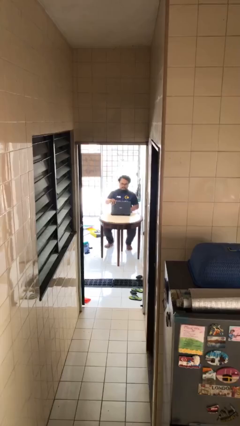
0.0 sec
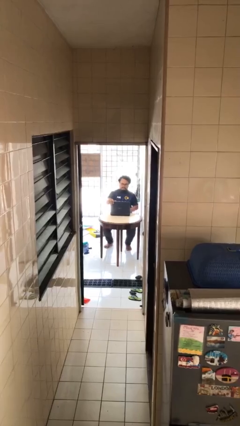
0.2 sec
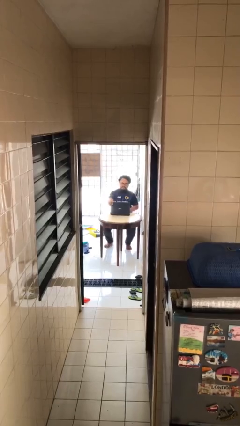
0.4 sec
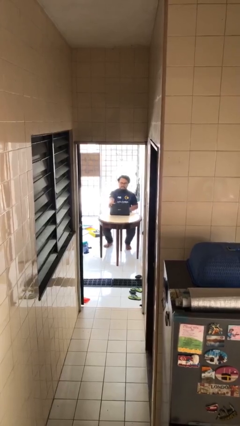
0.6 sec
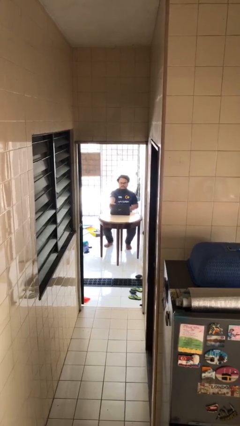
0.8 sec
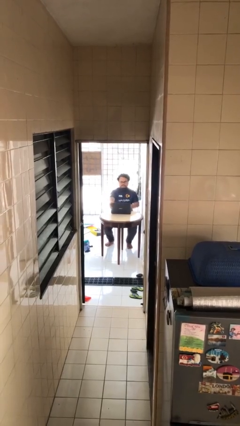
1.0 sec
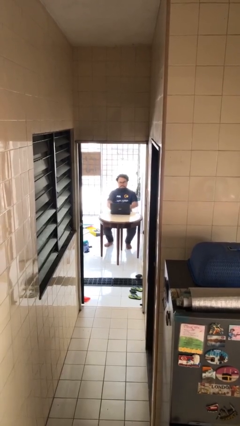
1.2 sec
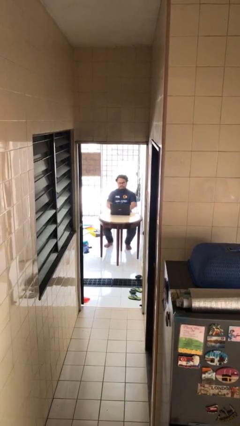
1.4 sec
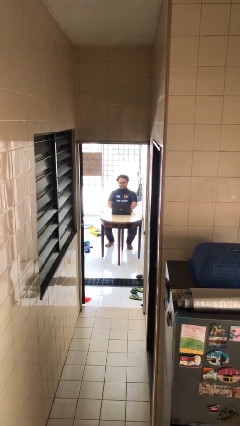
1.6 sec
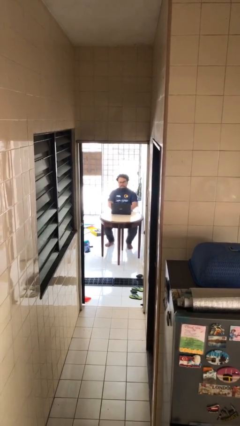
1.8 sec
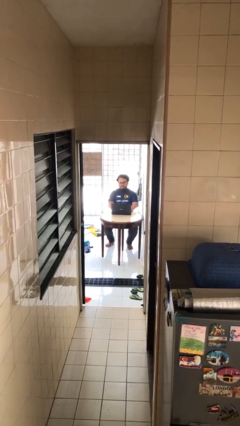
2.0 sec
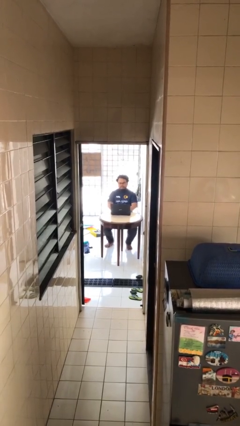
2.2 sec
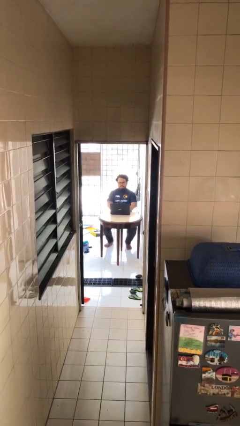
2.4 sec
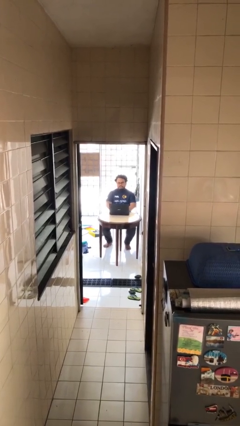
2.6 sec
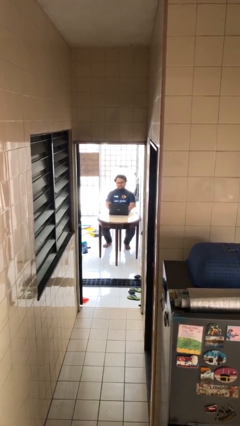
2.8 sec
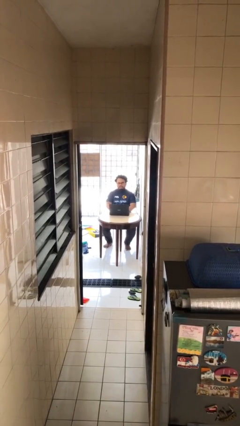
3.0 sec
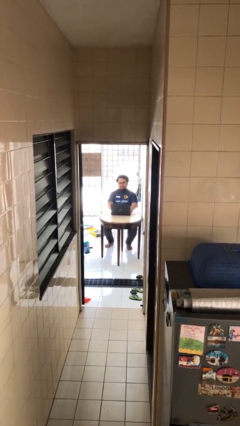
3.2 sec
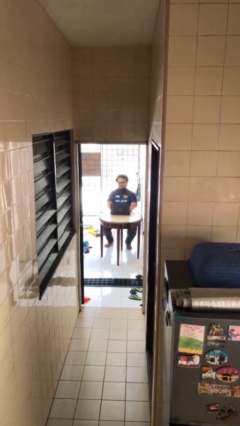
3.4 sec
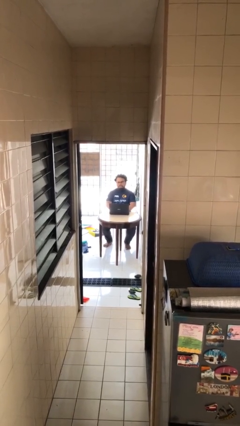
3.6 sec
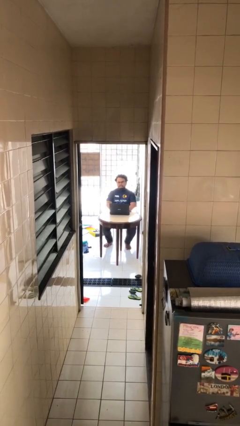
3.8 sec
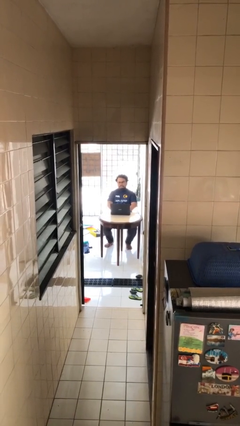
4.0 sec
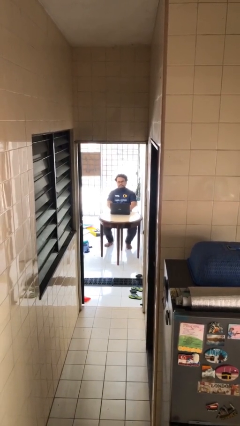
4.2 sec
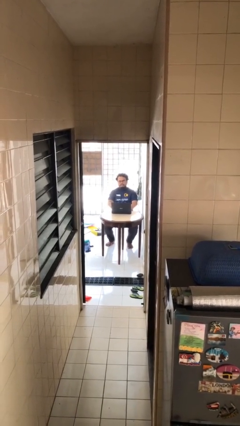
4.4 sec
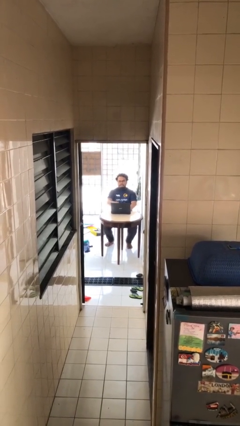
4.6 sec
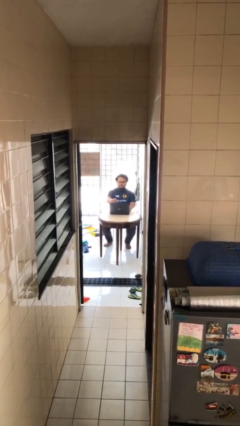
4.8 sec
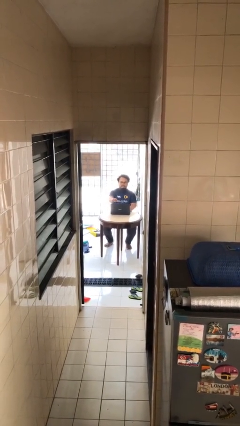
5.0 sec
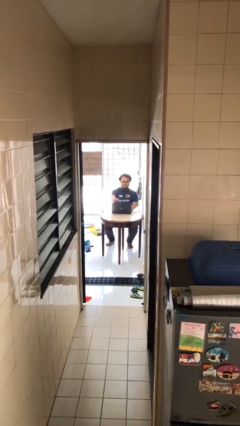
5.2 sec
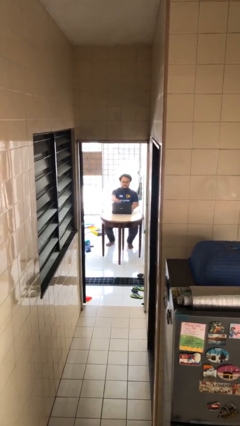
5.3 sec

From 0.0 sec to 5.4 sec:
person interacts with laptop

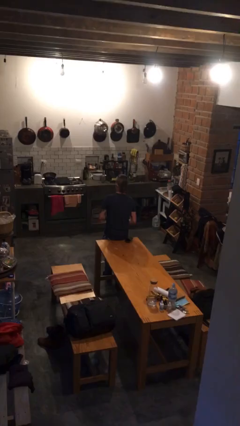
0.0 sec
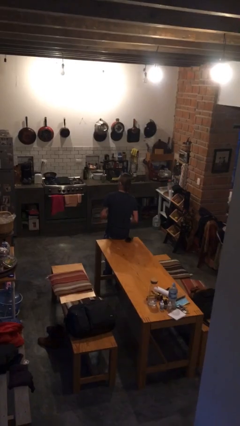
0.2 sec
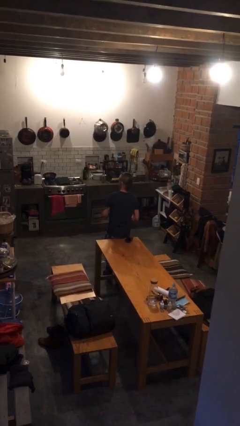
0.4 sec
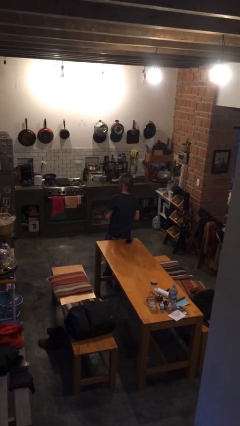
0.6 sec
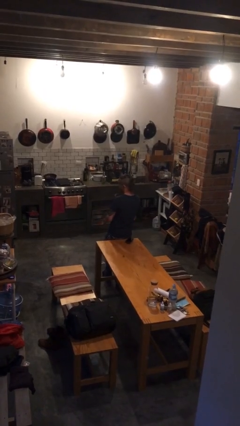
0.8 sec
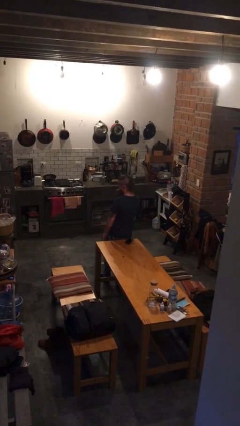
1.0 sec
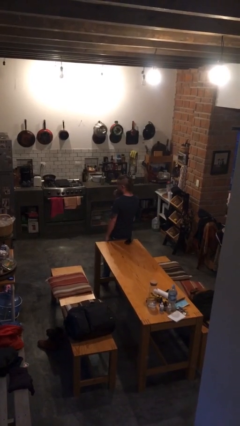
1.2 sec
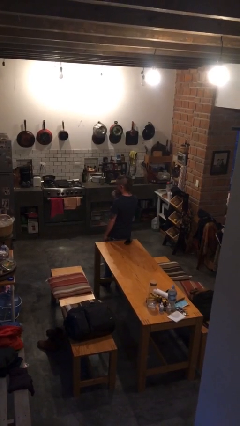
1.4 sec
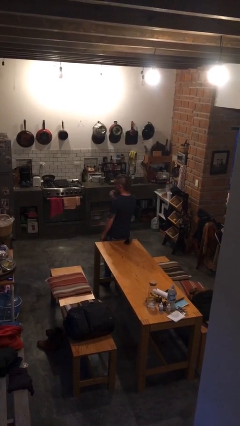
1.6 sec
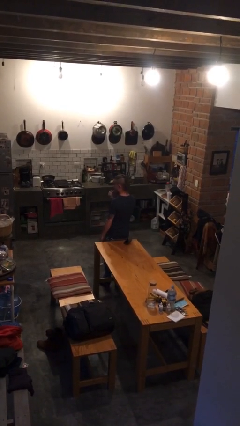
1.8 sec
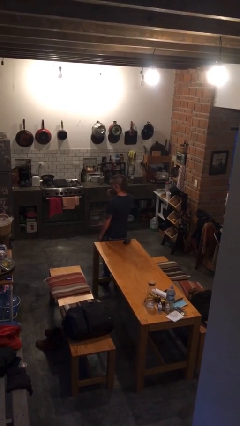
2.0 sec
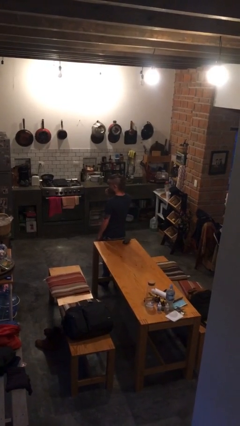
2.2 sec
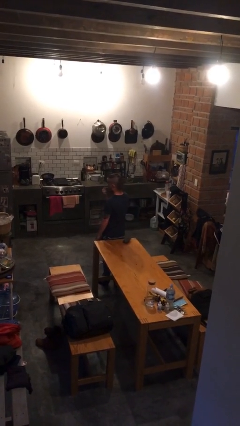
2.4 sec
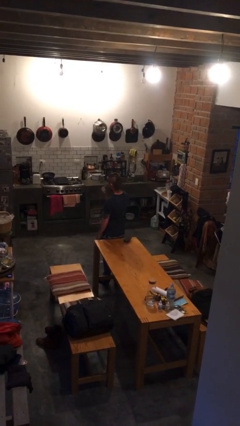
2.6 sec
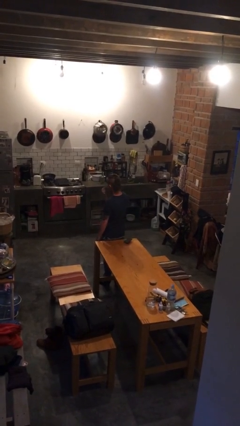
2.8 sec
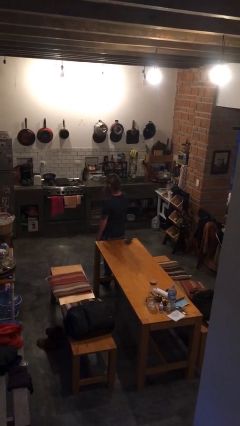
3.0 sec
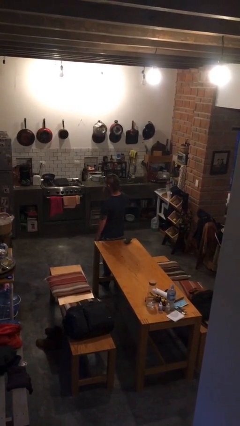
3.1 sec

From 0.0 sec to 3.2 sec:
person applies lip makeup

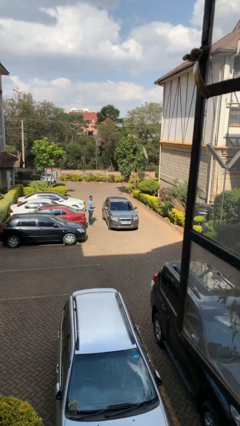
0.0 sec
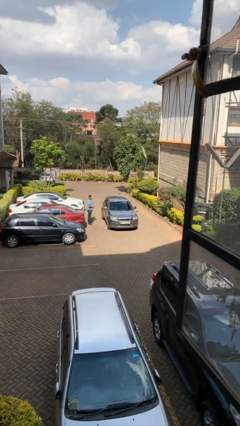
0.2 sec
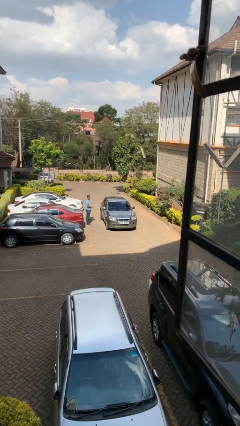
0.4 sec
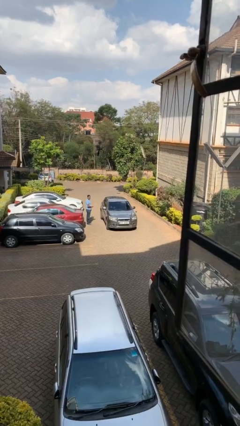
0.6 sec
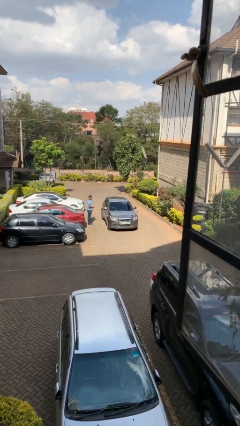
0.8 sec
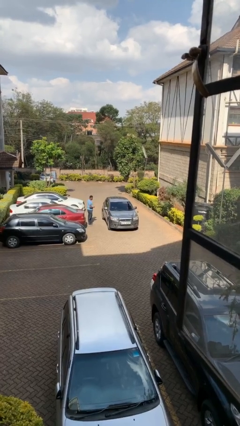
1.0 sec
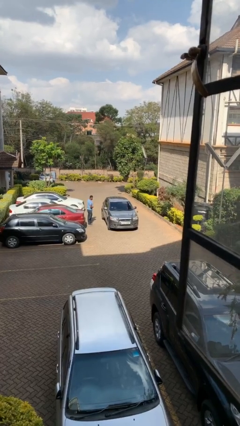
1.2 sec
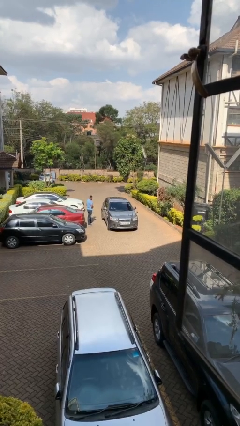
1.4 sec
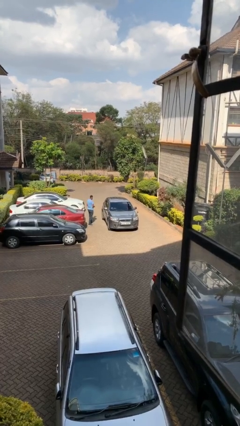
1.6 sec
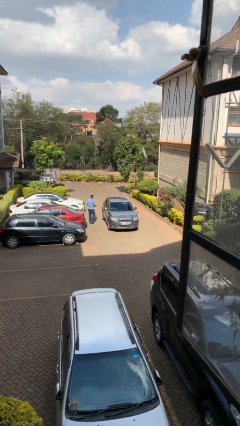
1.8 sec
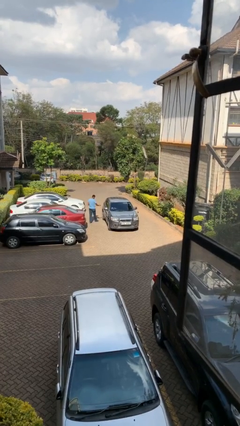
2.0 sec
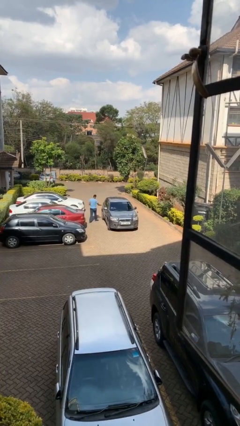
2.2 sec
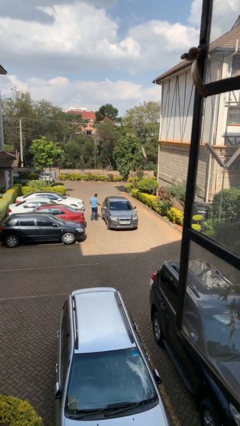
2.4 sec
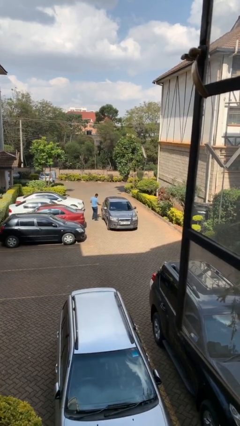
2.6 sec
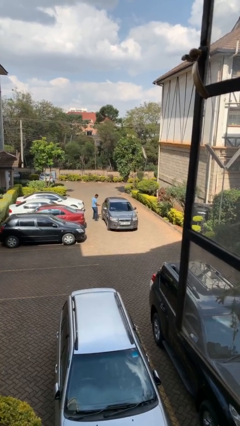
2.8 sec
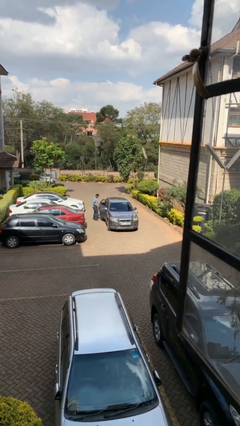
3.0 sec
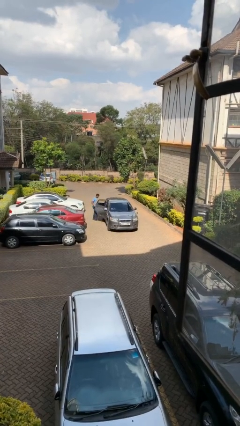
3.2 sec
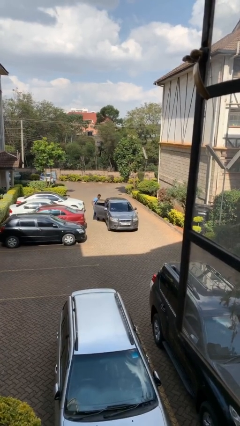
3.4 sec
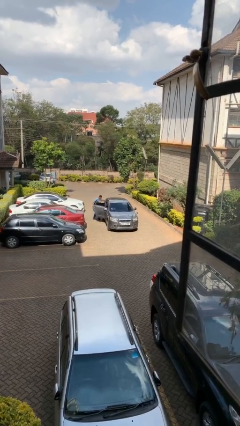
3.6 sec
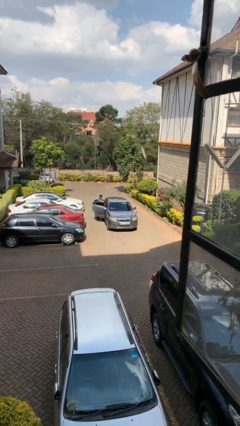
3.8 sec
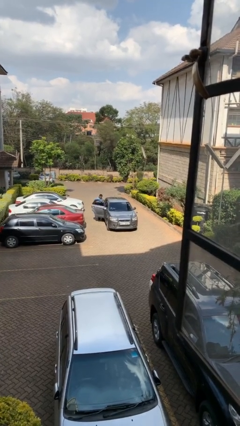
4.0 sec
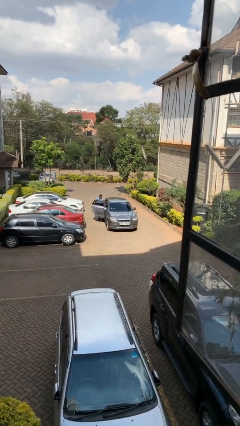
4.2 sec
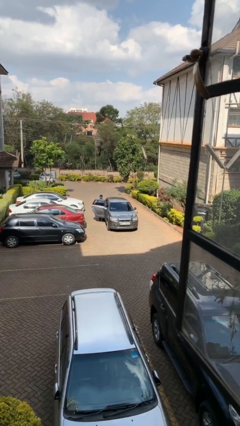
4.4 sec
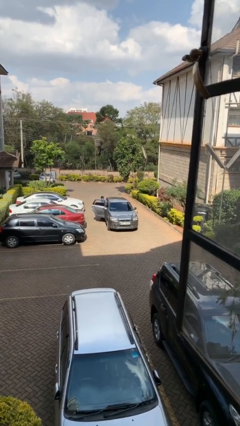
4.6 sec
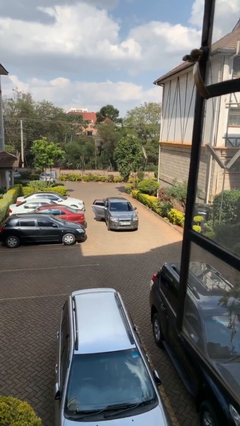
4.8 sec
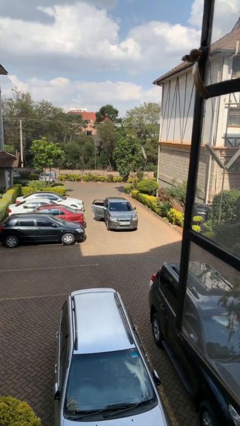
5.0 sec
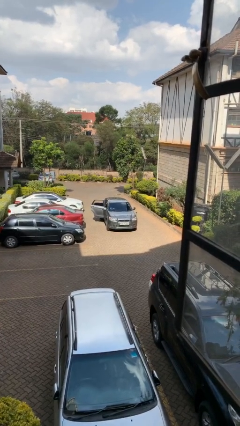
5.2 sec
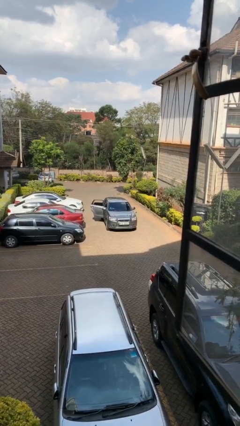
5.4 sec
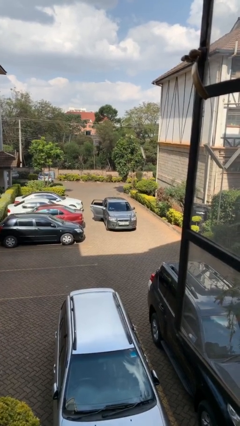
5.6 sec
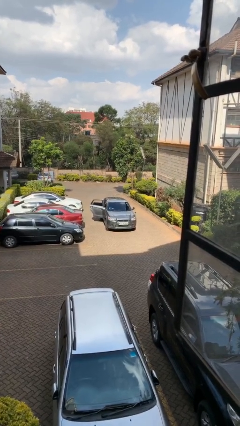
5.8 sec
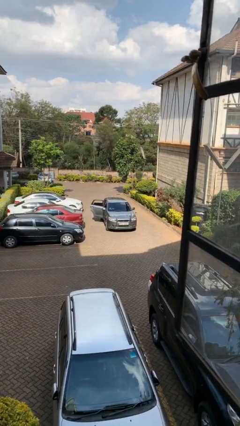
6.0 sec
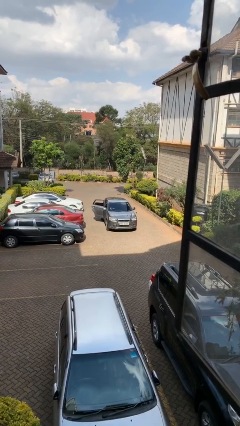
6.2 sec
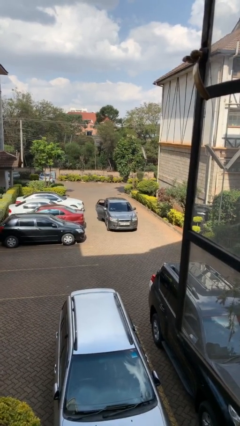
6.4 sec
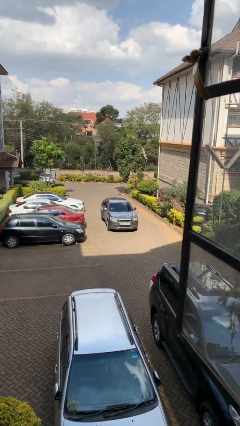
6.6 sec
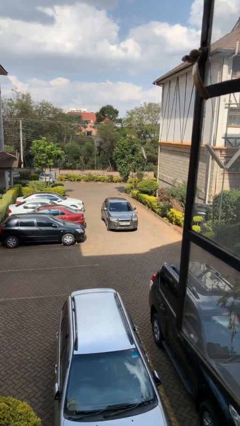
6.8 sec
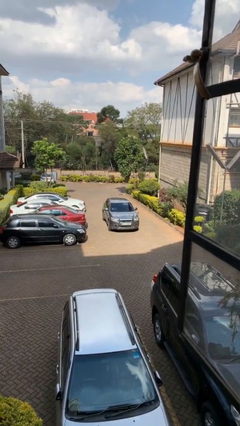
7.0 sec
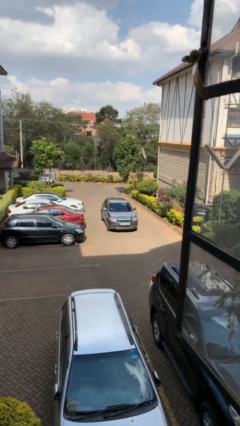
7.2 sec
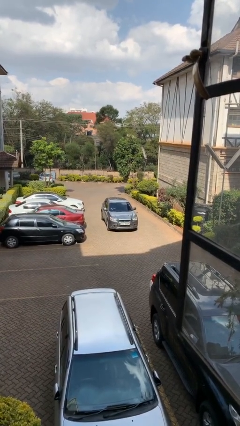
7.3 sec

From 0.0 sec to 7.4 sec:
car picks up person

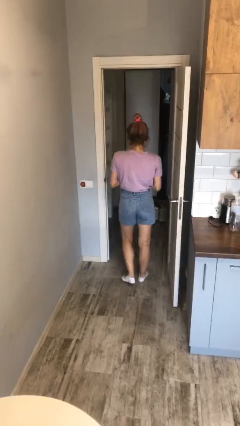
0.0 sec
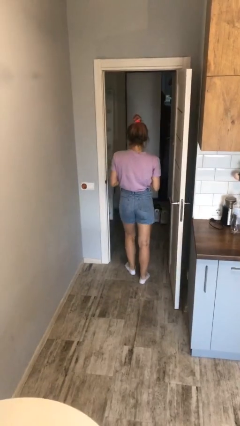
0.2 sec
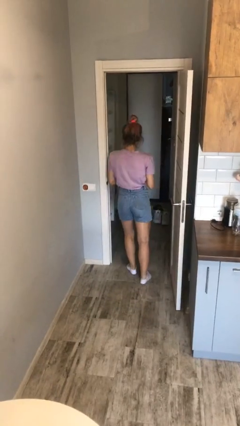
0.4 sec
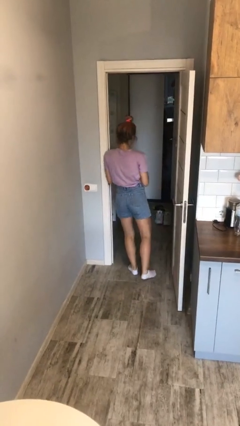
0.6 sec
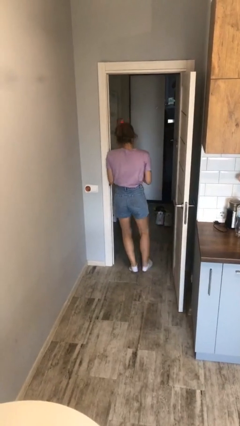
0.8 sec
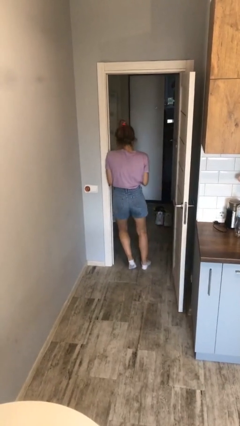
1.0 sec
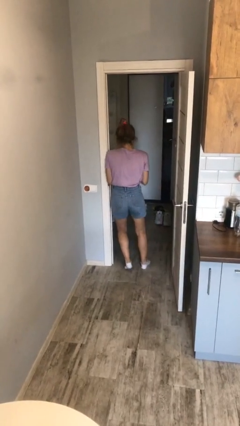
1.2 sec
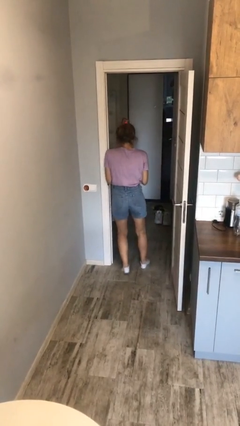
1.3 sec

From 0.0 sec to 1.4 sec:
person bumps into wall
